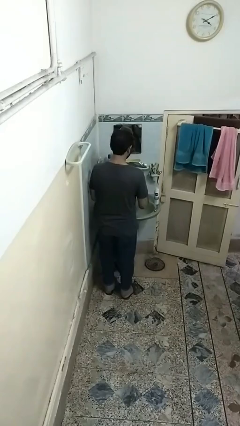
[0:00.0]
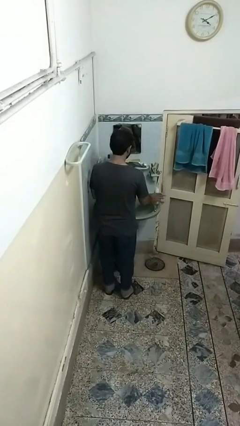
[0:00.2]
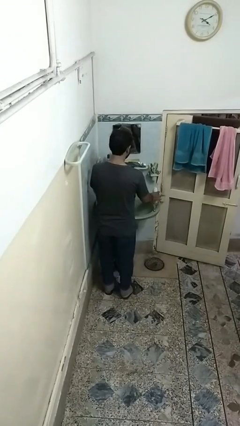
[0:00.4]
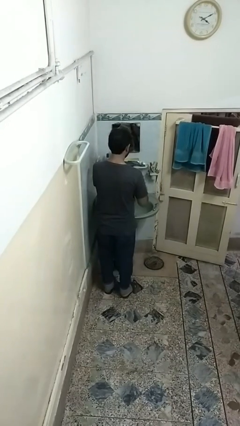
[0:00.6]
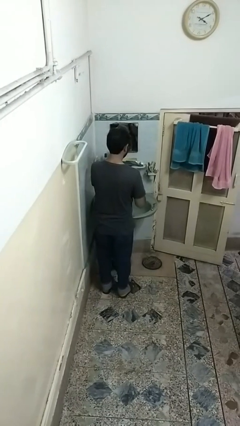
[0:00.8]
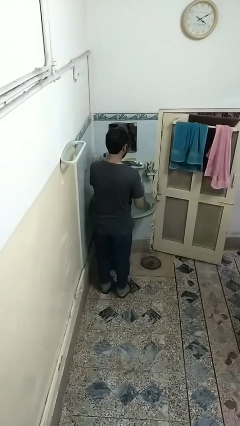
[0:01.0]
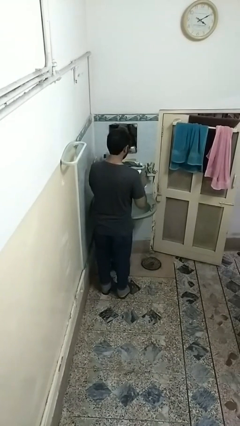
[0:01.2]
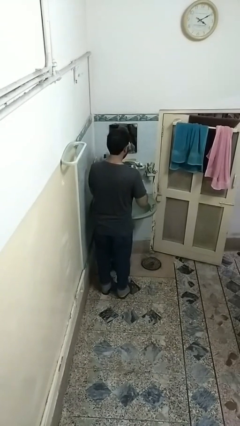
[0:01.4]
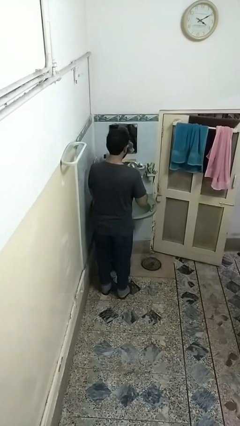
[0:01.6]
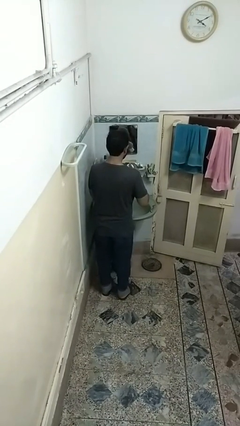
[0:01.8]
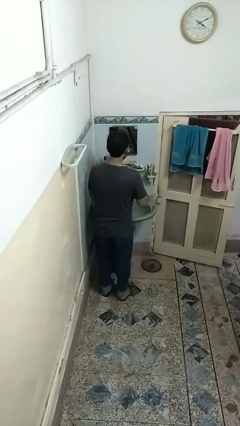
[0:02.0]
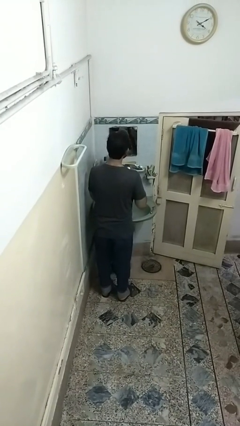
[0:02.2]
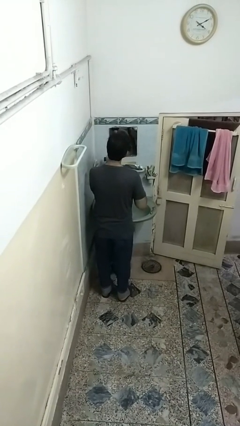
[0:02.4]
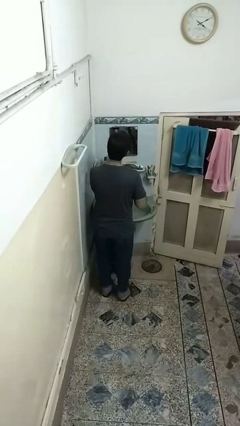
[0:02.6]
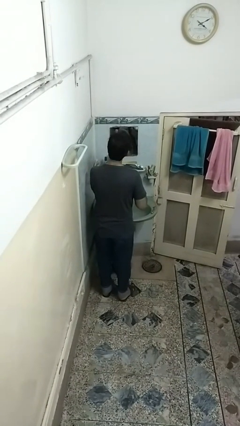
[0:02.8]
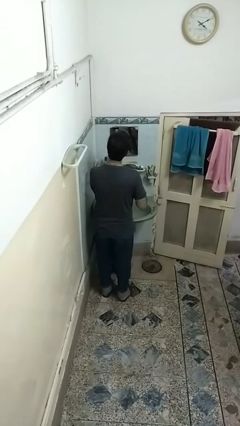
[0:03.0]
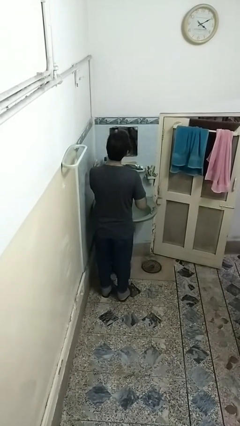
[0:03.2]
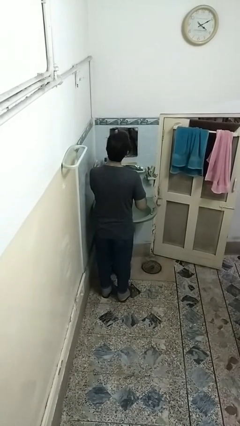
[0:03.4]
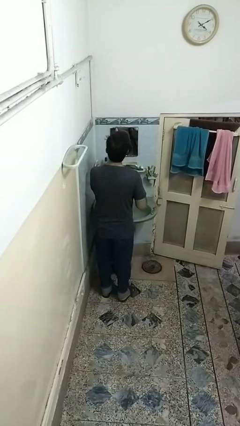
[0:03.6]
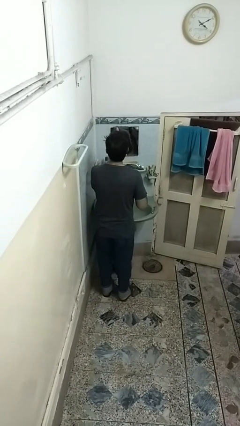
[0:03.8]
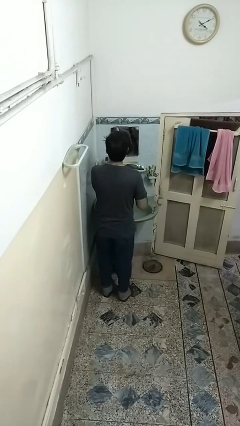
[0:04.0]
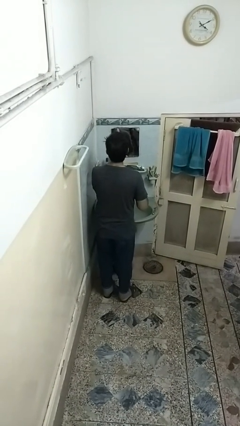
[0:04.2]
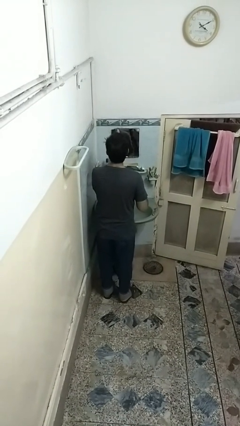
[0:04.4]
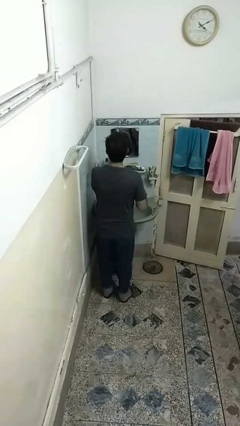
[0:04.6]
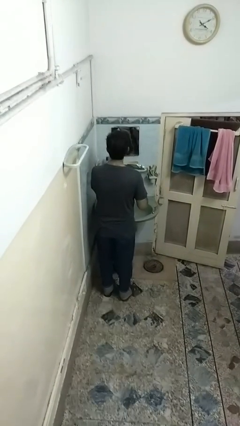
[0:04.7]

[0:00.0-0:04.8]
person applies shaving cream

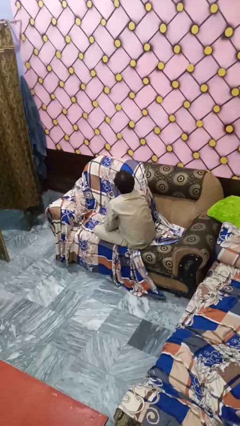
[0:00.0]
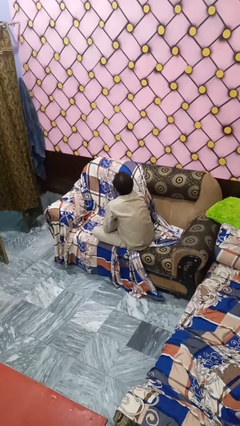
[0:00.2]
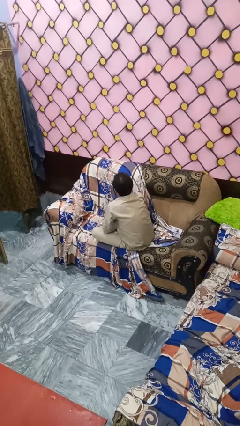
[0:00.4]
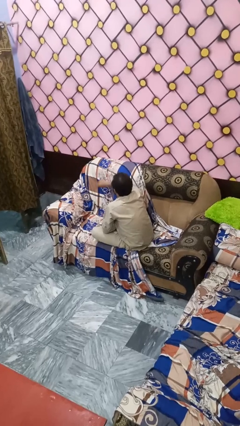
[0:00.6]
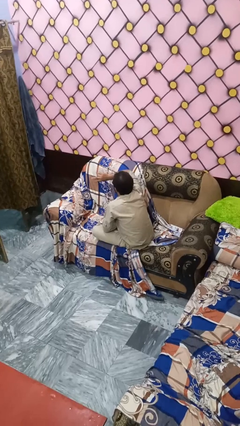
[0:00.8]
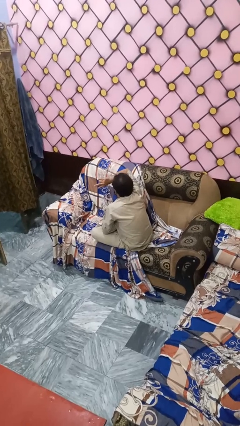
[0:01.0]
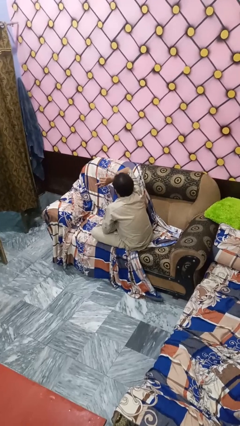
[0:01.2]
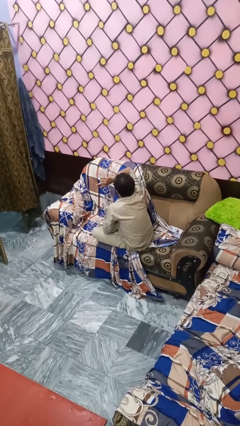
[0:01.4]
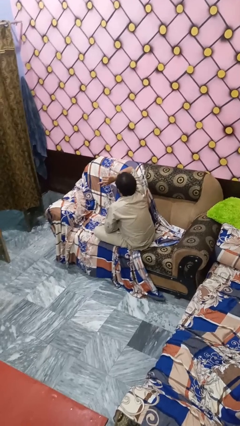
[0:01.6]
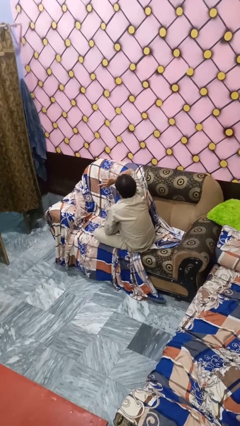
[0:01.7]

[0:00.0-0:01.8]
person gestures watch closely

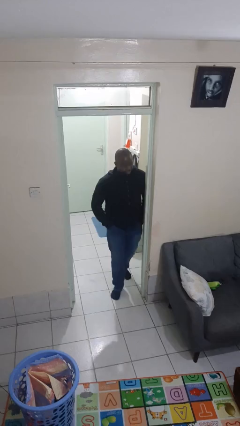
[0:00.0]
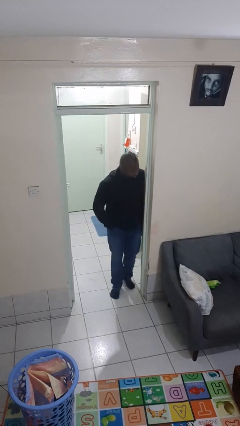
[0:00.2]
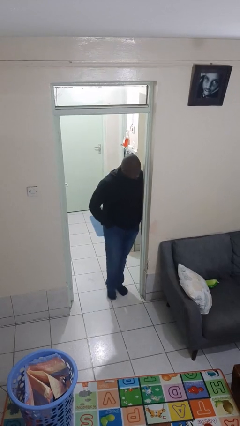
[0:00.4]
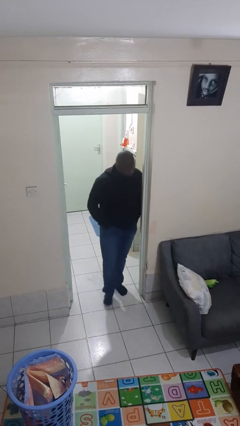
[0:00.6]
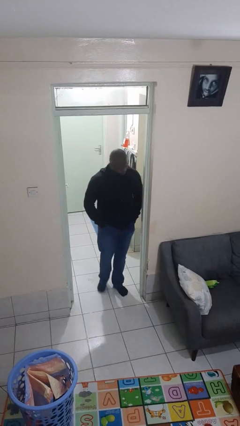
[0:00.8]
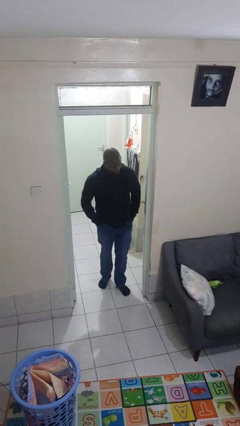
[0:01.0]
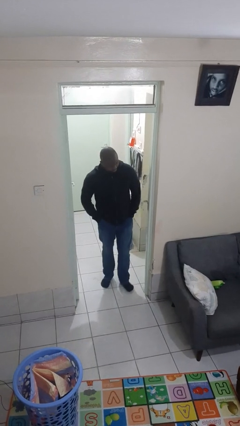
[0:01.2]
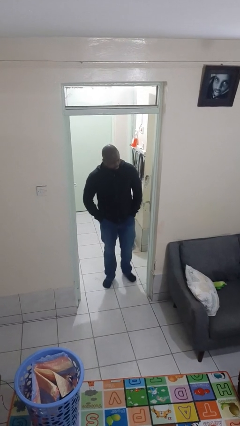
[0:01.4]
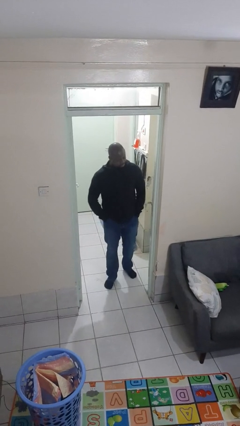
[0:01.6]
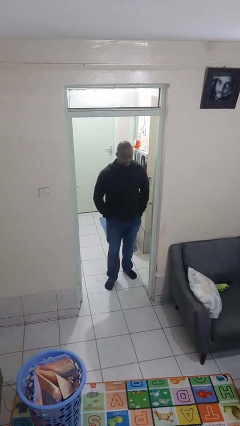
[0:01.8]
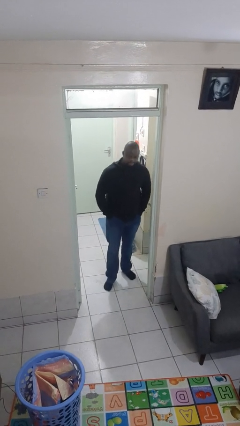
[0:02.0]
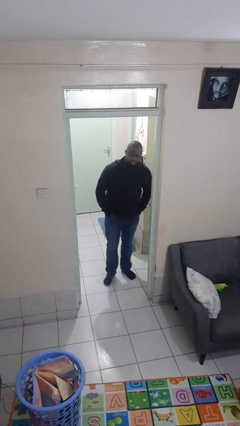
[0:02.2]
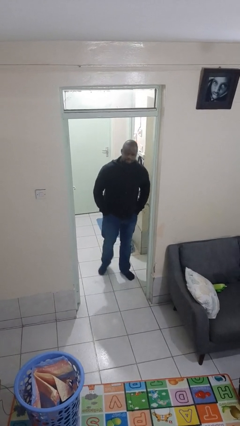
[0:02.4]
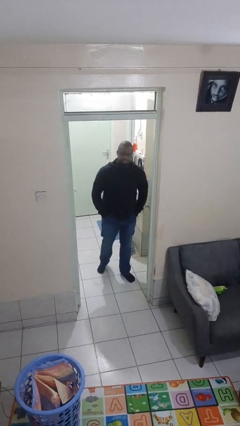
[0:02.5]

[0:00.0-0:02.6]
person bumps into wall

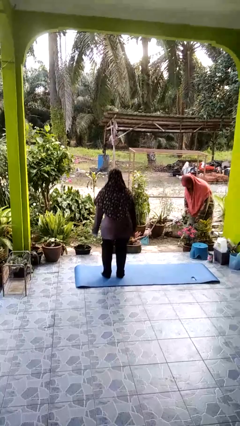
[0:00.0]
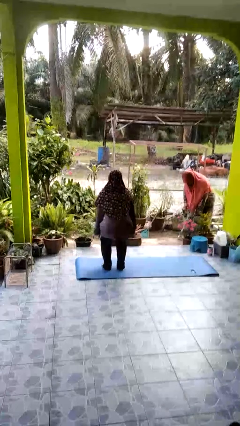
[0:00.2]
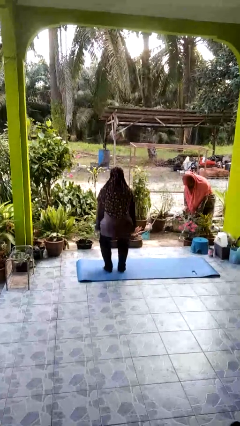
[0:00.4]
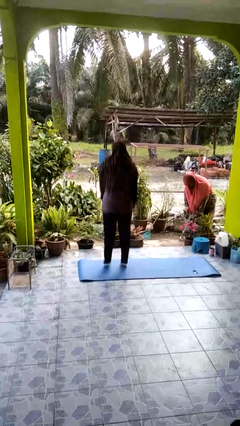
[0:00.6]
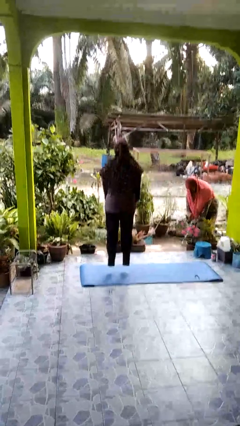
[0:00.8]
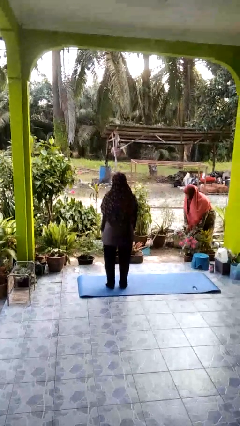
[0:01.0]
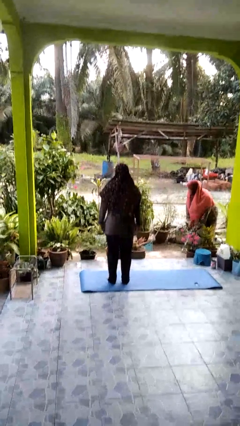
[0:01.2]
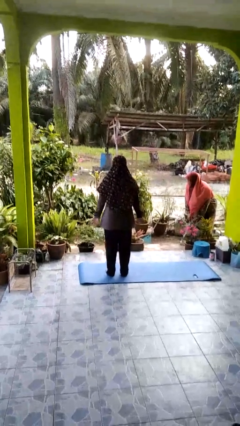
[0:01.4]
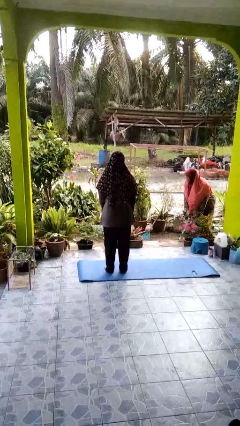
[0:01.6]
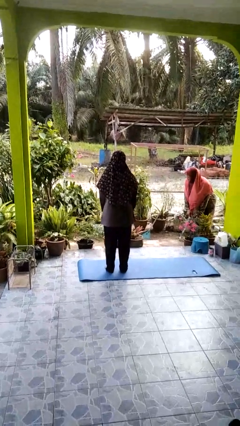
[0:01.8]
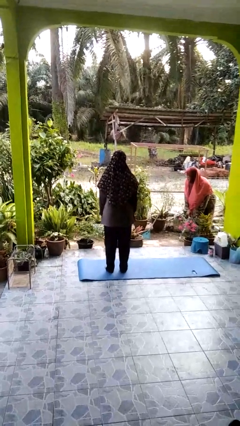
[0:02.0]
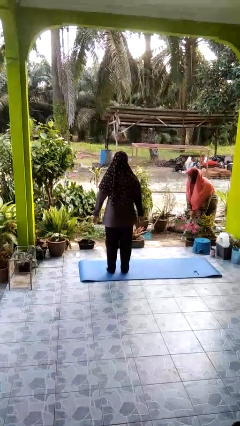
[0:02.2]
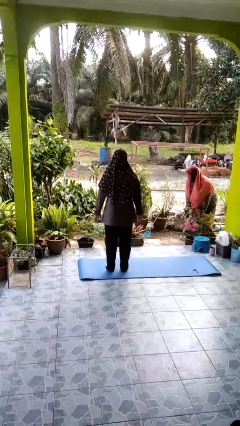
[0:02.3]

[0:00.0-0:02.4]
person jumps

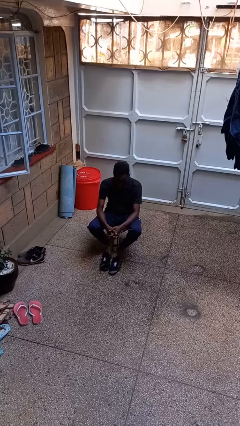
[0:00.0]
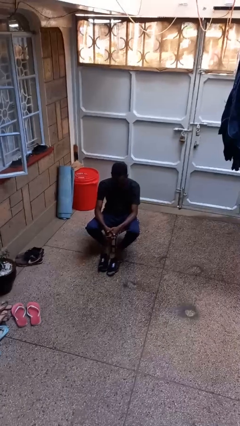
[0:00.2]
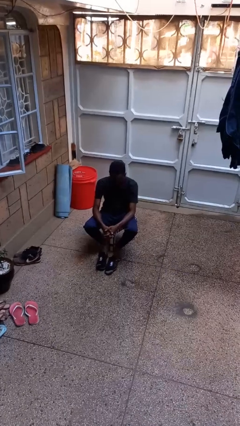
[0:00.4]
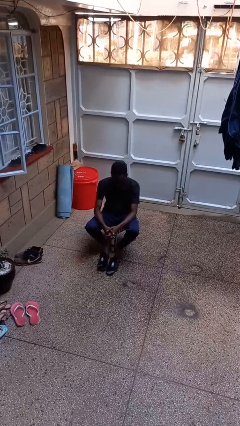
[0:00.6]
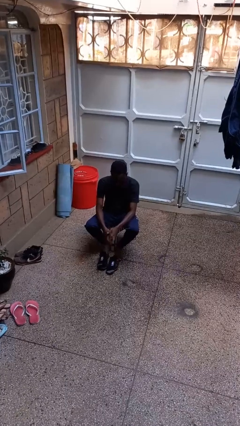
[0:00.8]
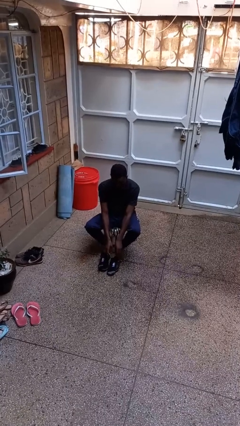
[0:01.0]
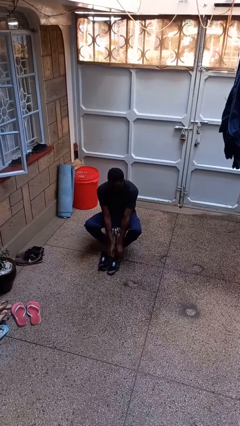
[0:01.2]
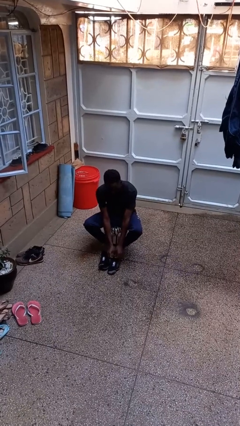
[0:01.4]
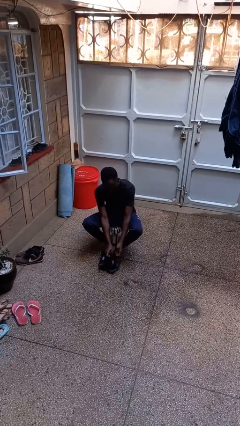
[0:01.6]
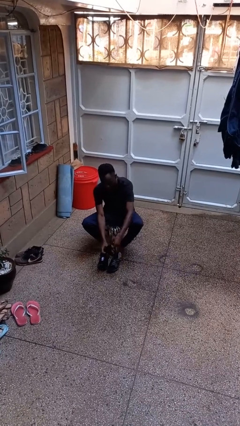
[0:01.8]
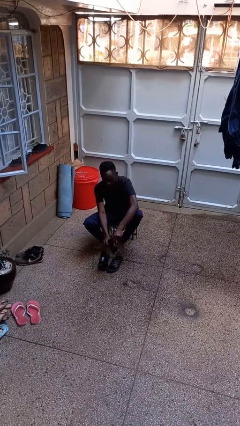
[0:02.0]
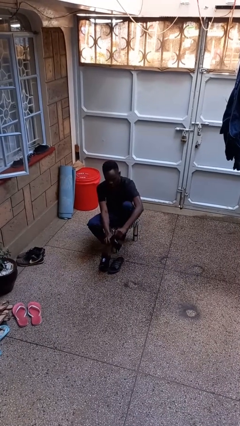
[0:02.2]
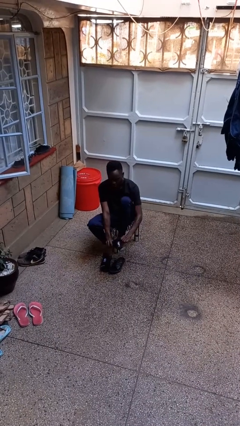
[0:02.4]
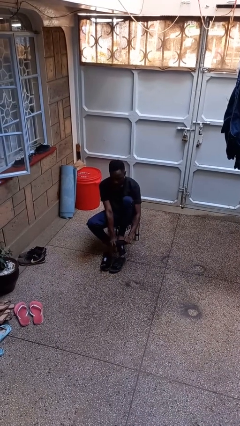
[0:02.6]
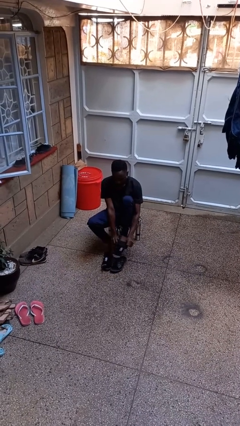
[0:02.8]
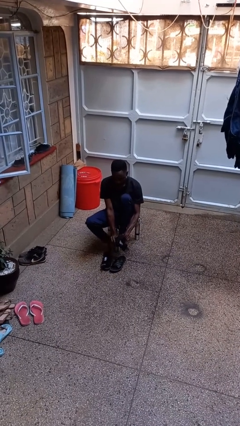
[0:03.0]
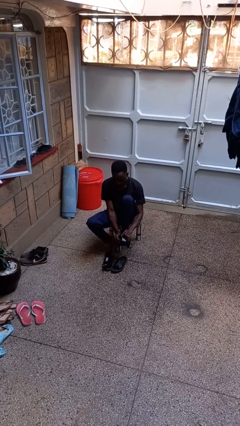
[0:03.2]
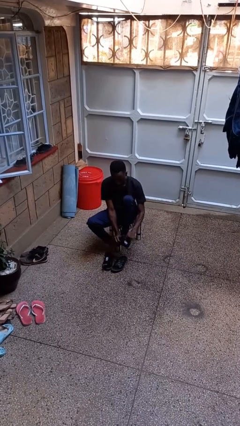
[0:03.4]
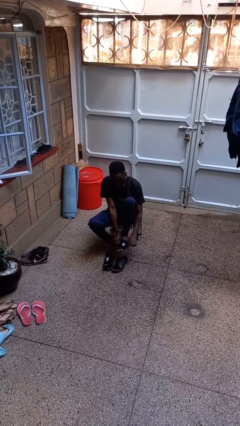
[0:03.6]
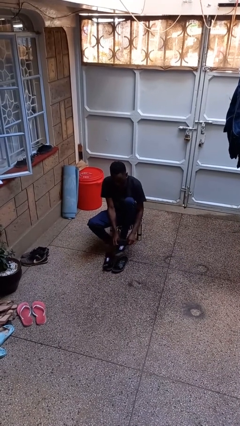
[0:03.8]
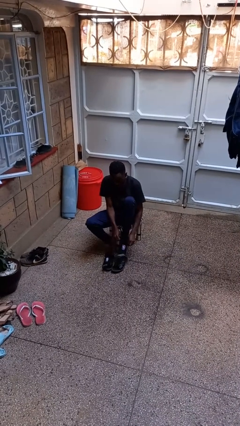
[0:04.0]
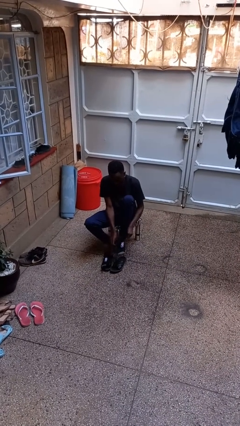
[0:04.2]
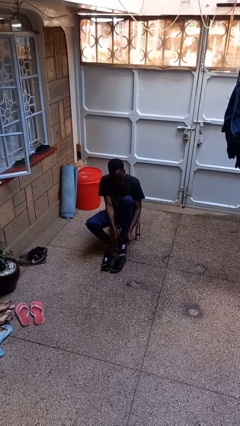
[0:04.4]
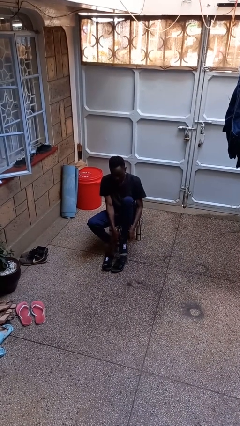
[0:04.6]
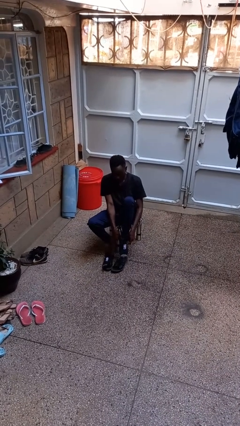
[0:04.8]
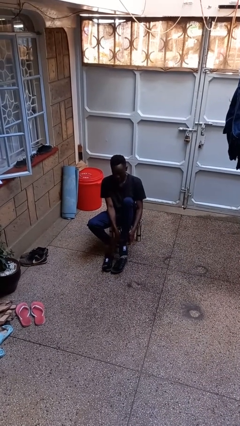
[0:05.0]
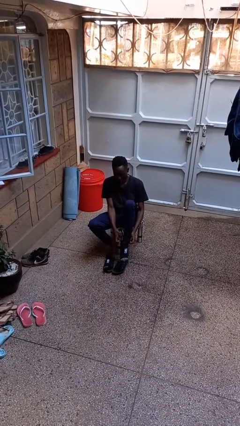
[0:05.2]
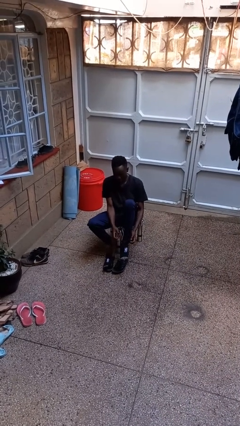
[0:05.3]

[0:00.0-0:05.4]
person puts on socks

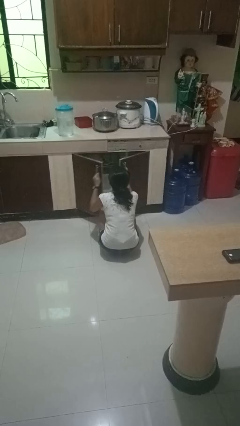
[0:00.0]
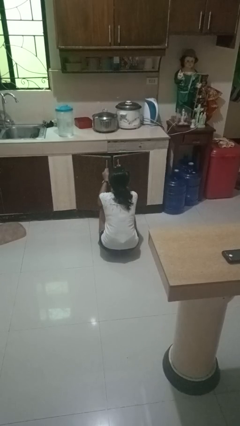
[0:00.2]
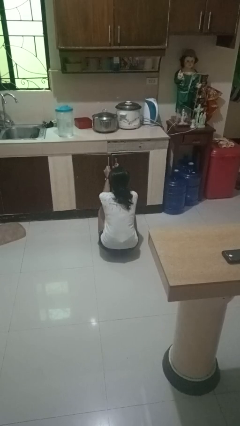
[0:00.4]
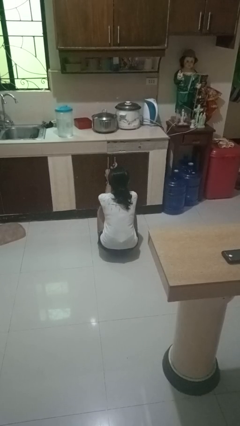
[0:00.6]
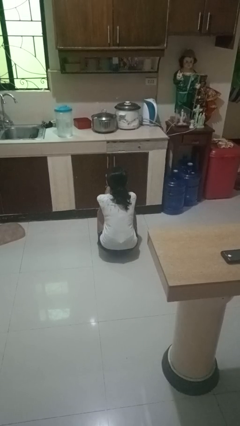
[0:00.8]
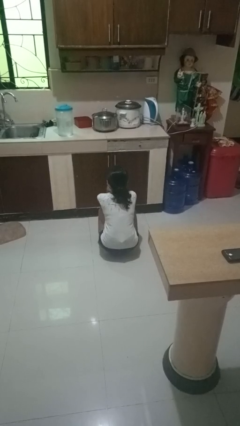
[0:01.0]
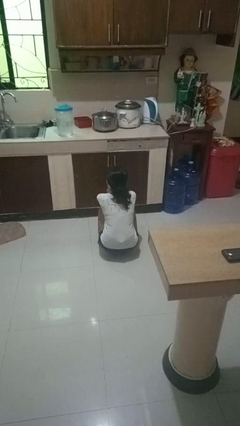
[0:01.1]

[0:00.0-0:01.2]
person closes dishwasher
